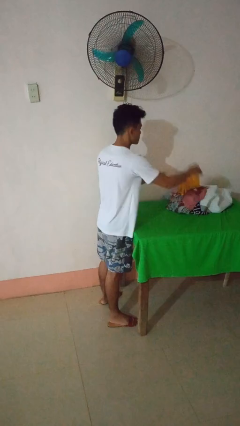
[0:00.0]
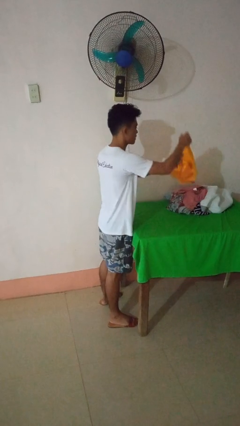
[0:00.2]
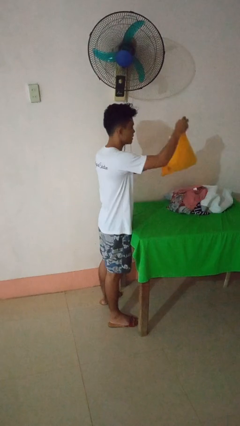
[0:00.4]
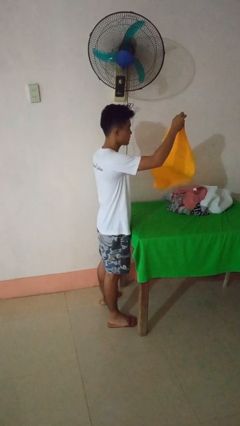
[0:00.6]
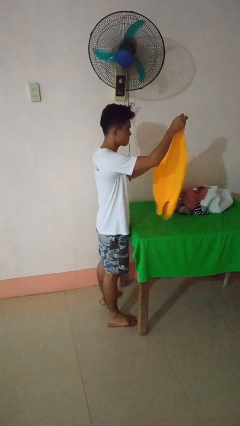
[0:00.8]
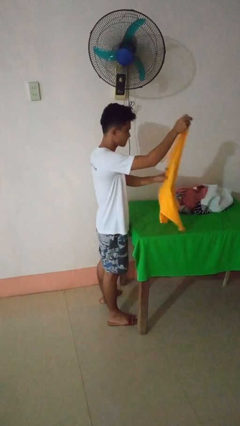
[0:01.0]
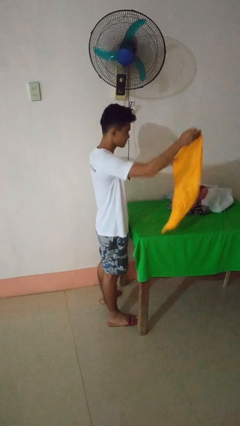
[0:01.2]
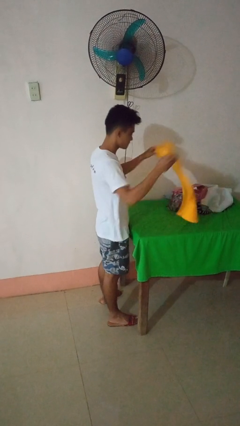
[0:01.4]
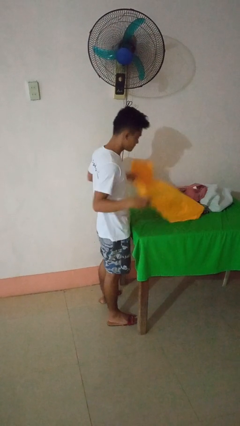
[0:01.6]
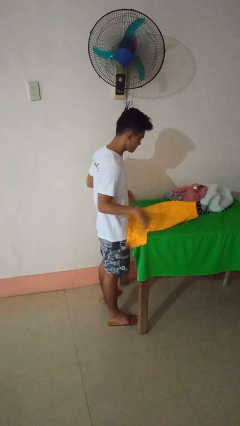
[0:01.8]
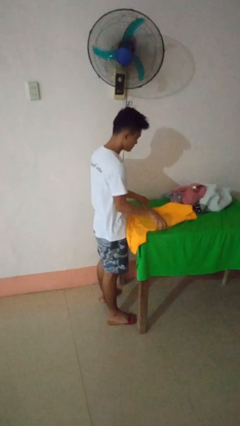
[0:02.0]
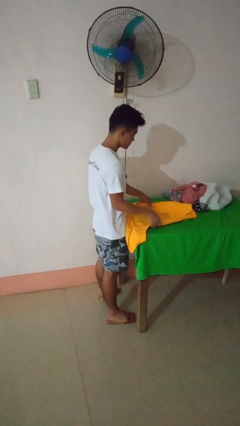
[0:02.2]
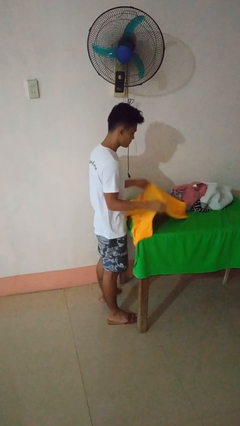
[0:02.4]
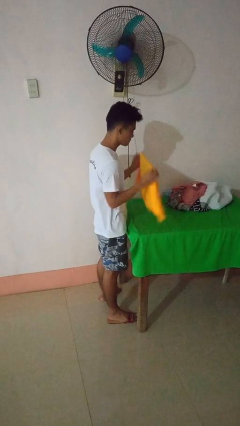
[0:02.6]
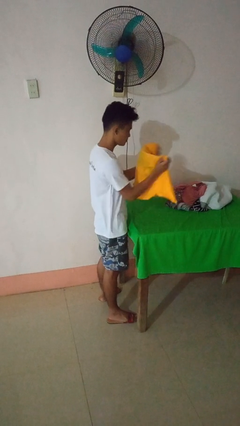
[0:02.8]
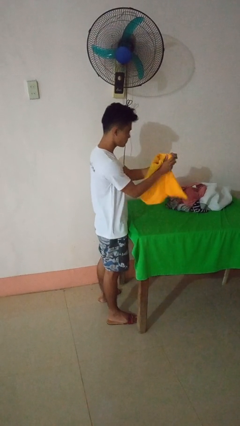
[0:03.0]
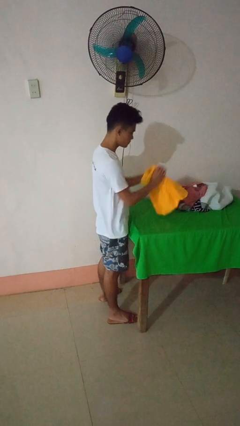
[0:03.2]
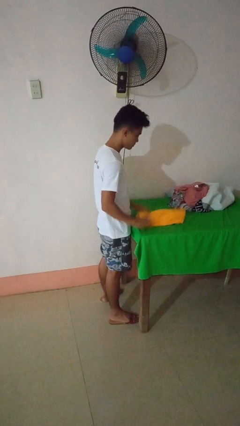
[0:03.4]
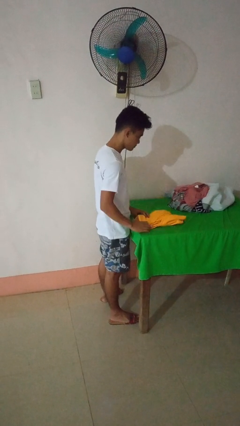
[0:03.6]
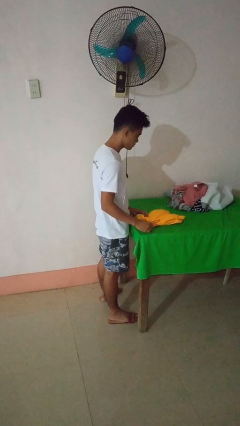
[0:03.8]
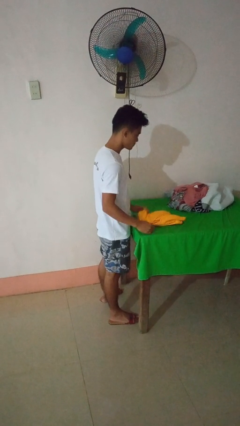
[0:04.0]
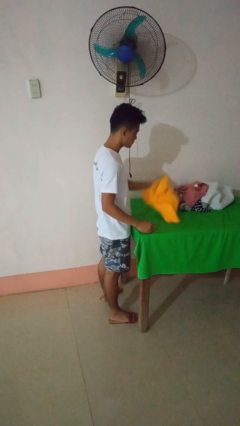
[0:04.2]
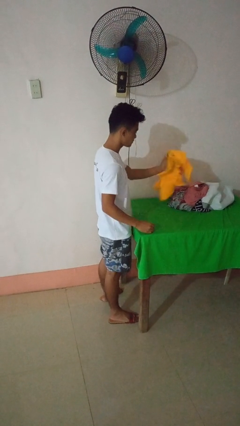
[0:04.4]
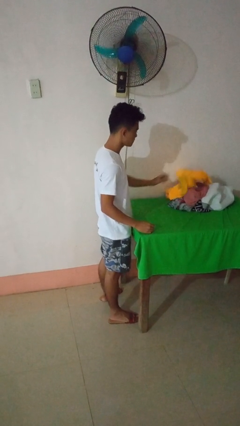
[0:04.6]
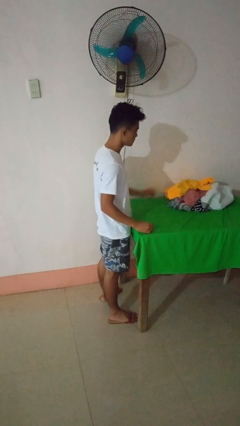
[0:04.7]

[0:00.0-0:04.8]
person folds shirt

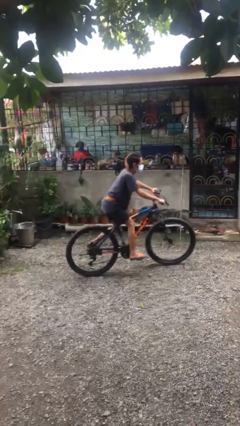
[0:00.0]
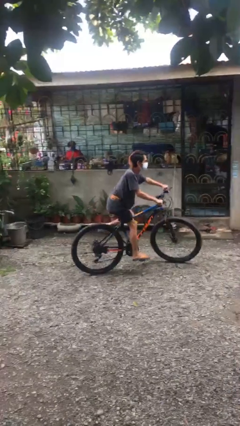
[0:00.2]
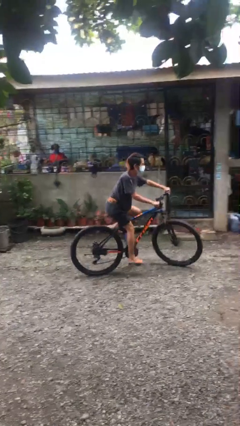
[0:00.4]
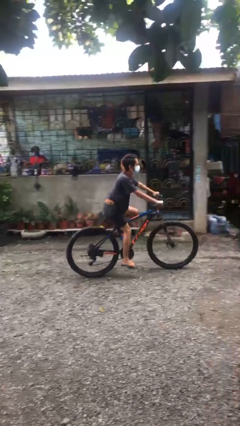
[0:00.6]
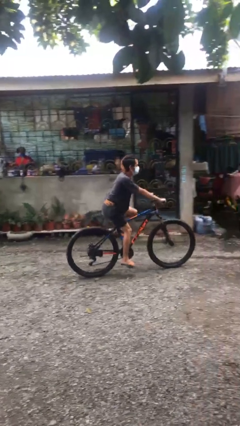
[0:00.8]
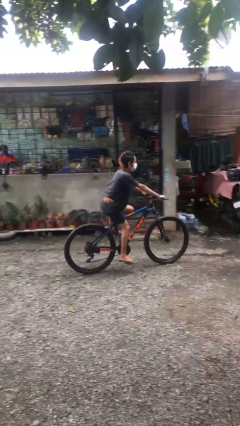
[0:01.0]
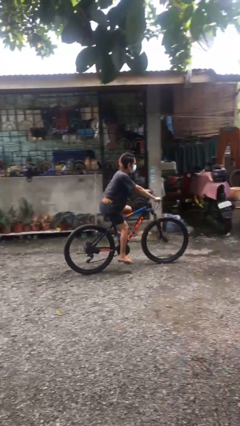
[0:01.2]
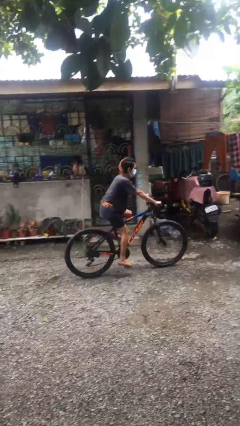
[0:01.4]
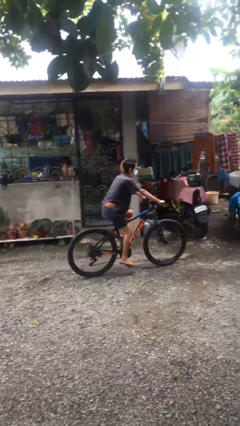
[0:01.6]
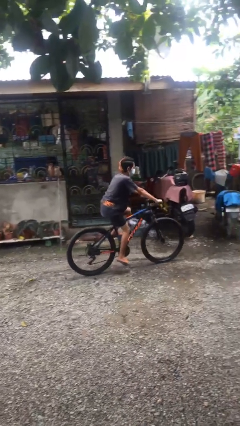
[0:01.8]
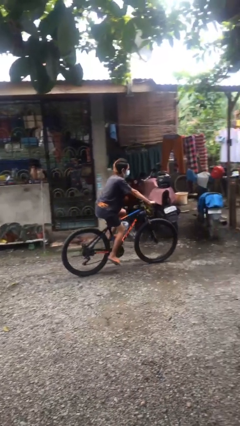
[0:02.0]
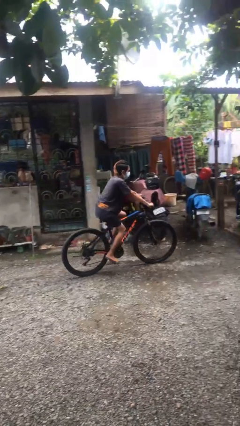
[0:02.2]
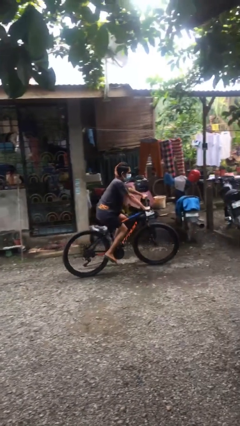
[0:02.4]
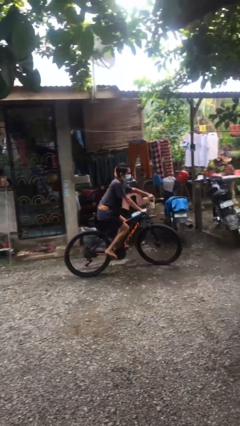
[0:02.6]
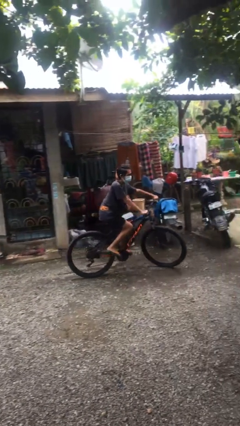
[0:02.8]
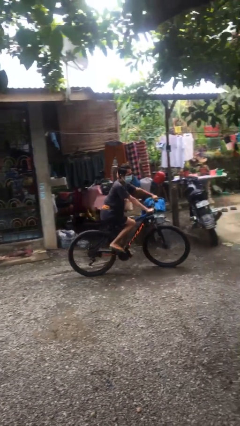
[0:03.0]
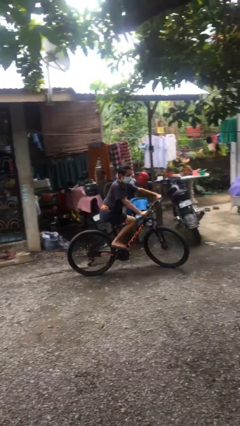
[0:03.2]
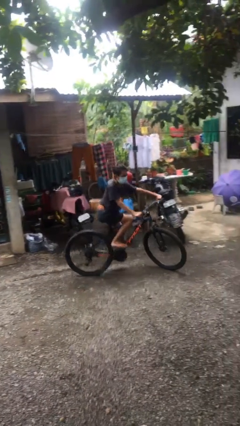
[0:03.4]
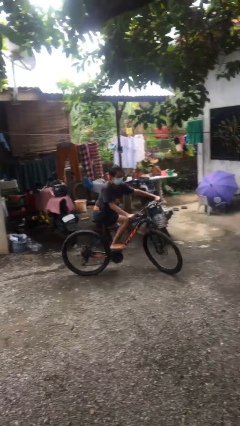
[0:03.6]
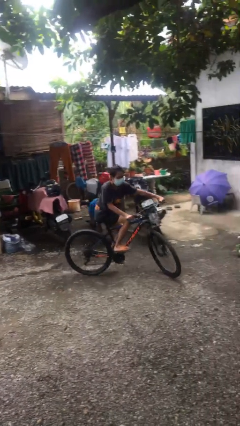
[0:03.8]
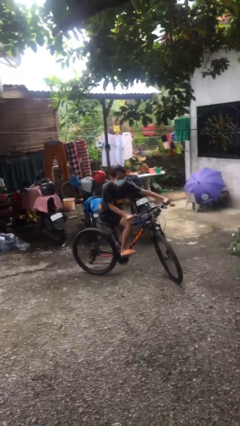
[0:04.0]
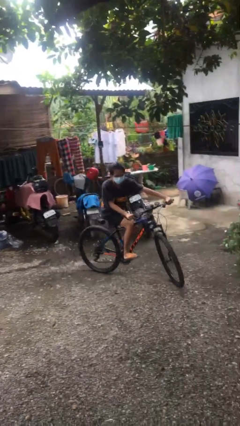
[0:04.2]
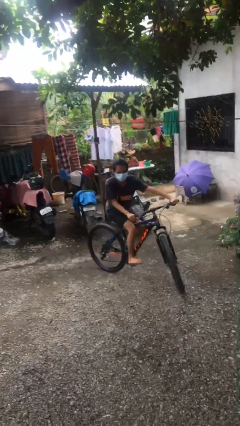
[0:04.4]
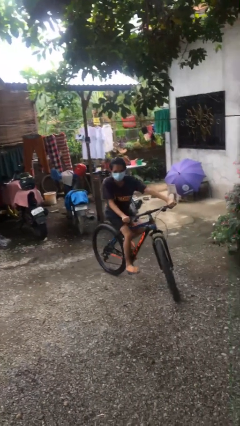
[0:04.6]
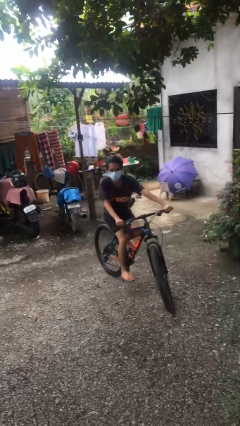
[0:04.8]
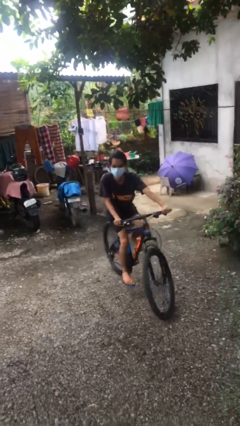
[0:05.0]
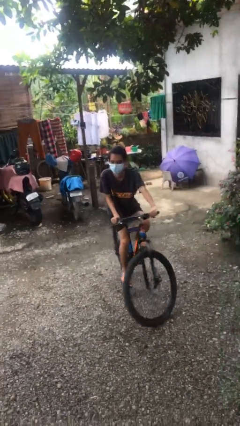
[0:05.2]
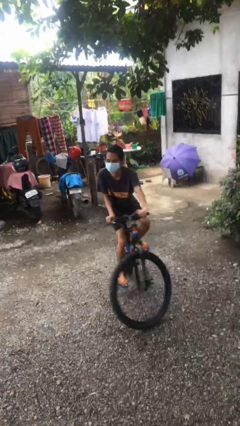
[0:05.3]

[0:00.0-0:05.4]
person rides bicycle

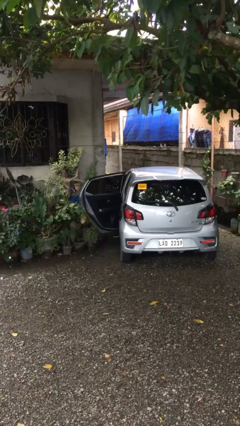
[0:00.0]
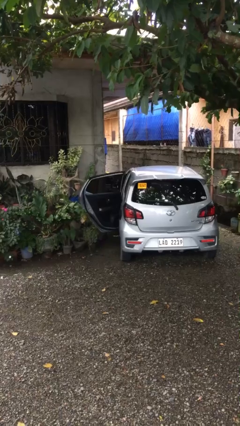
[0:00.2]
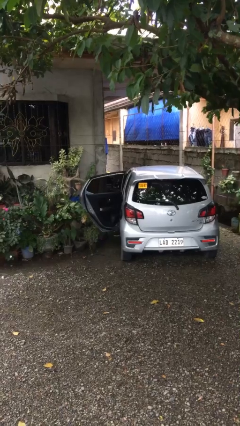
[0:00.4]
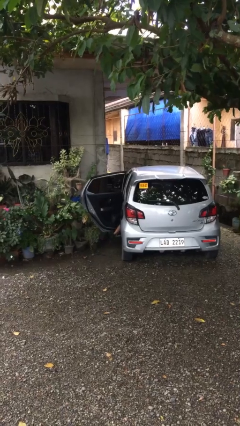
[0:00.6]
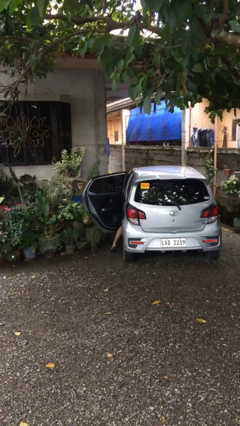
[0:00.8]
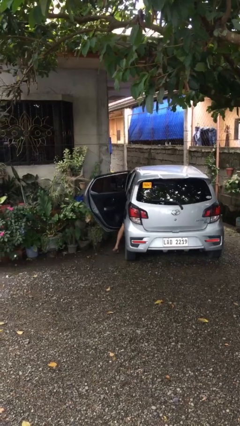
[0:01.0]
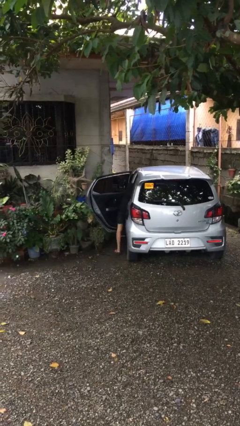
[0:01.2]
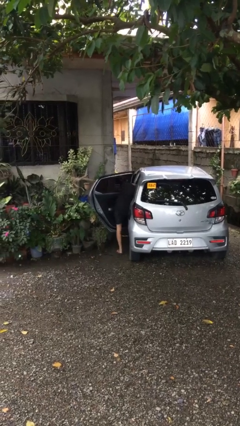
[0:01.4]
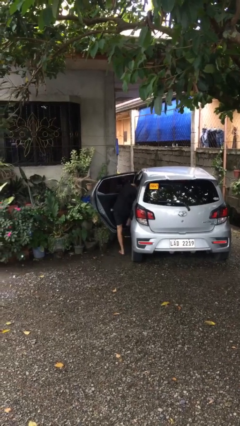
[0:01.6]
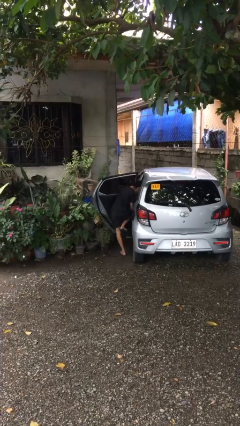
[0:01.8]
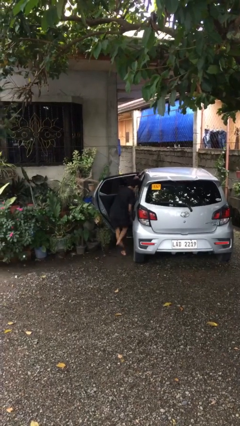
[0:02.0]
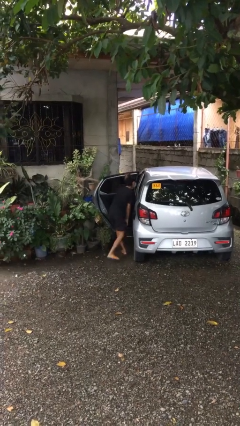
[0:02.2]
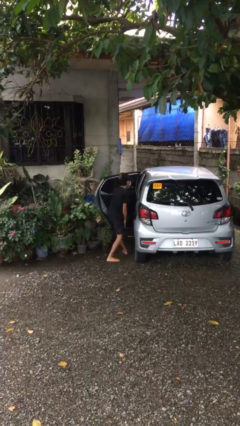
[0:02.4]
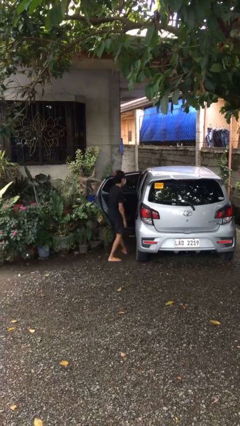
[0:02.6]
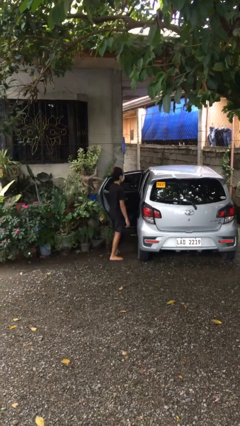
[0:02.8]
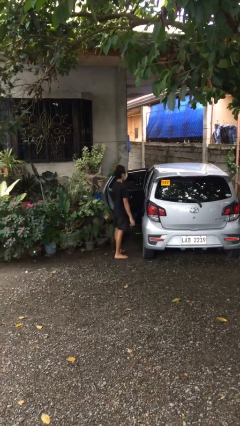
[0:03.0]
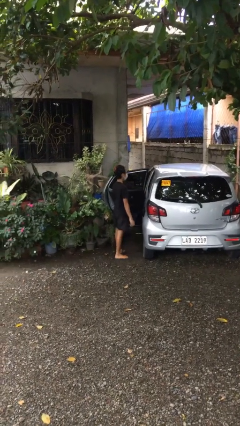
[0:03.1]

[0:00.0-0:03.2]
person exits car

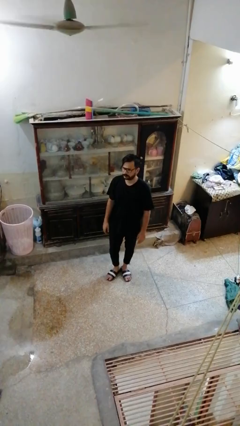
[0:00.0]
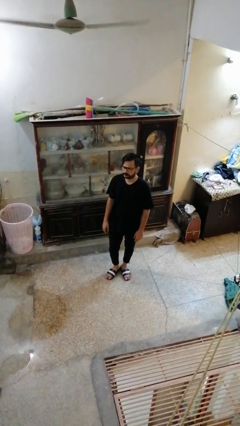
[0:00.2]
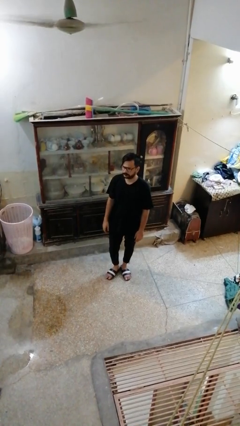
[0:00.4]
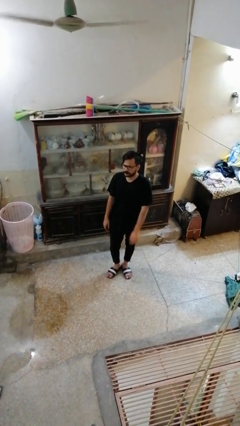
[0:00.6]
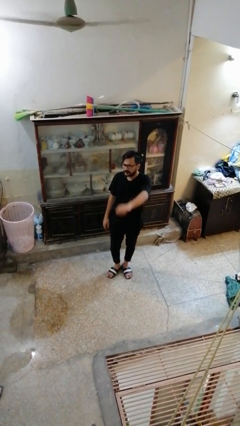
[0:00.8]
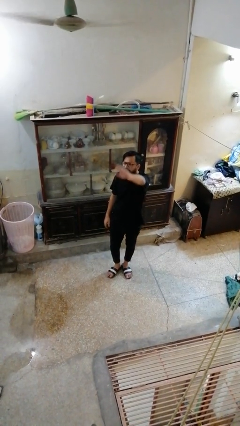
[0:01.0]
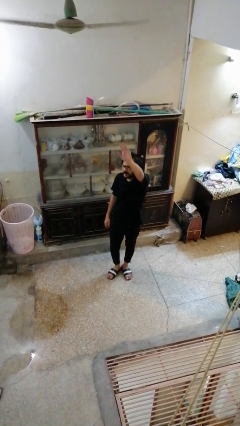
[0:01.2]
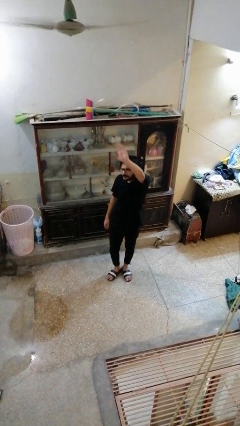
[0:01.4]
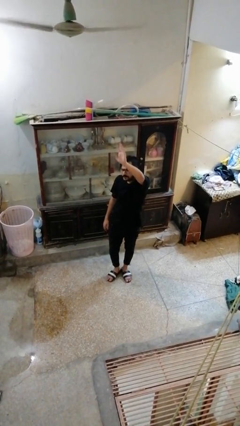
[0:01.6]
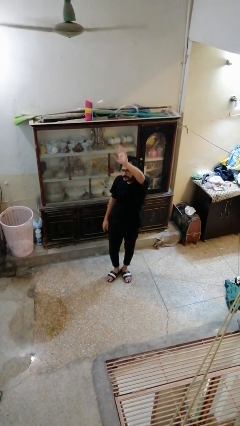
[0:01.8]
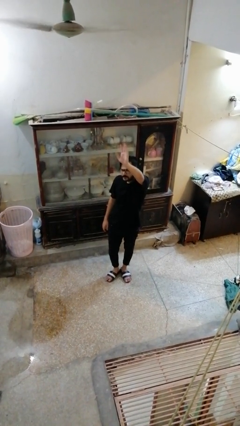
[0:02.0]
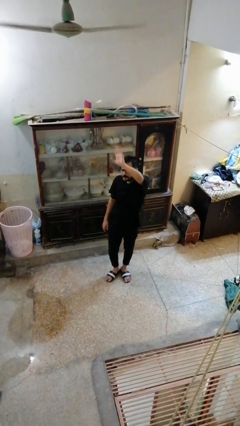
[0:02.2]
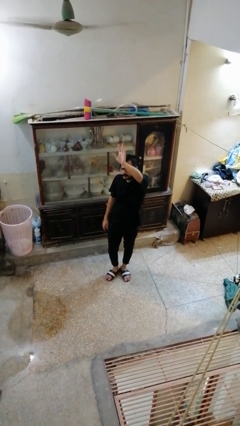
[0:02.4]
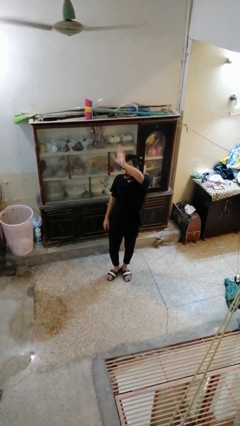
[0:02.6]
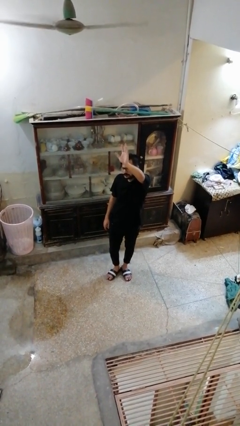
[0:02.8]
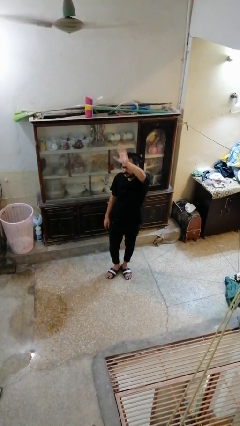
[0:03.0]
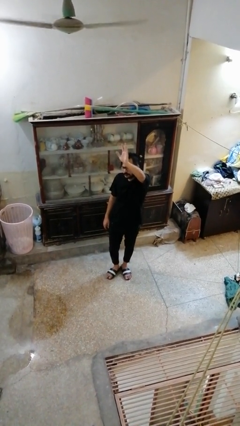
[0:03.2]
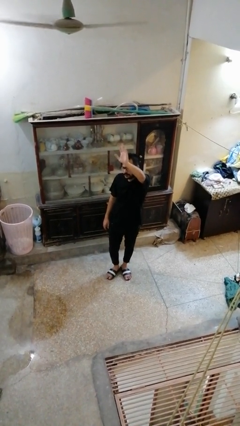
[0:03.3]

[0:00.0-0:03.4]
person gestures raise hand

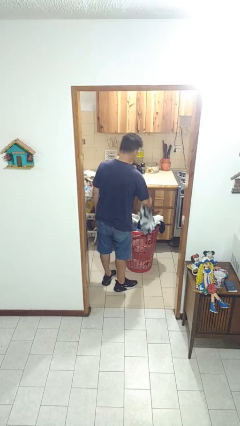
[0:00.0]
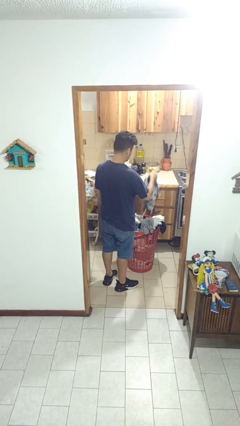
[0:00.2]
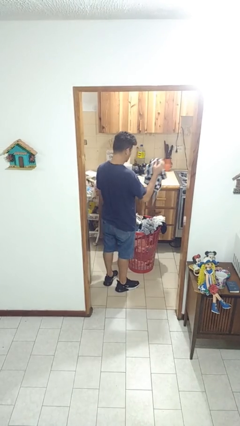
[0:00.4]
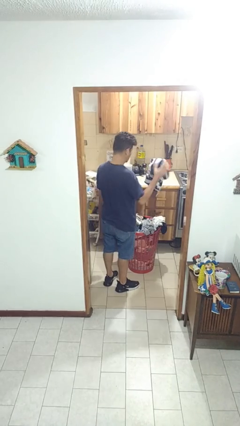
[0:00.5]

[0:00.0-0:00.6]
person takes object from basket
